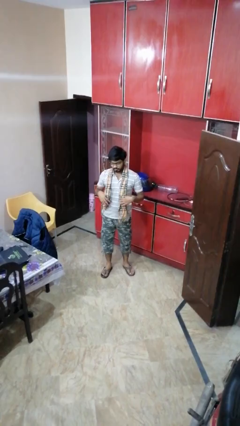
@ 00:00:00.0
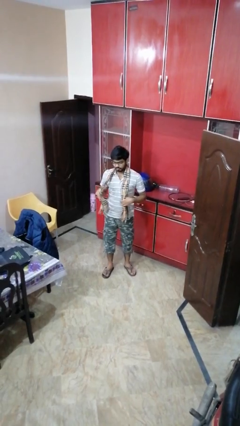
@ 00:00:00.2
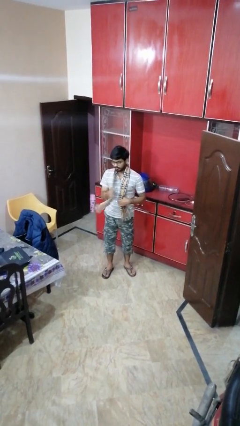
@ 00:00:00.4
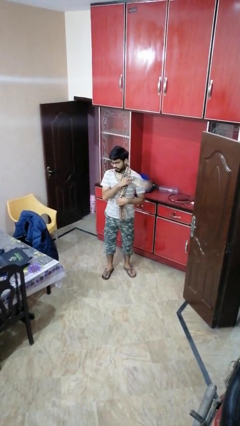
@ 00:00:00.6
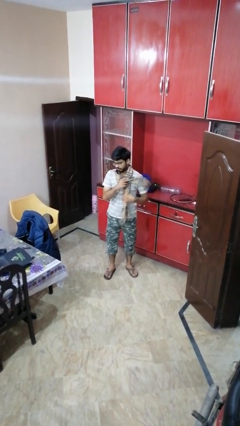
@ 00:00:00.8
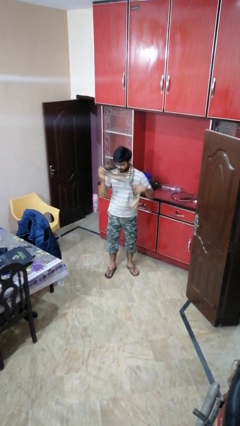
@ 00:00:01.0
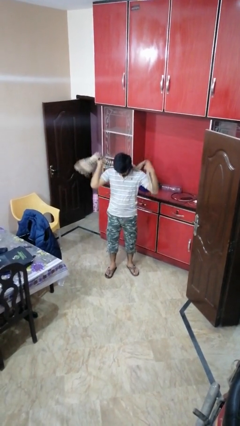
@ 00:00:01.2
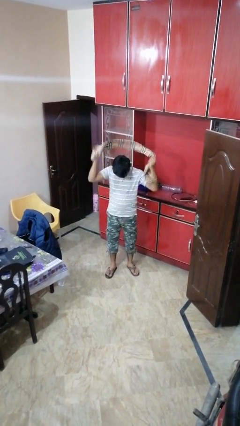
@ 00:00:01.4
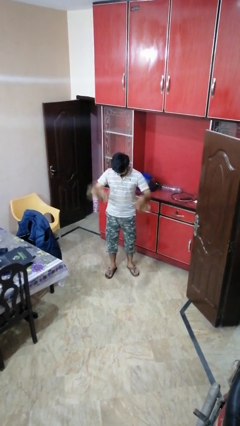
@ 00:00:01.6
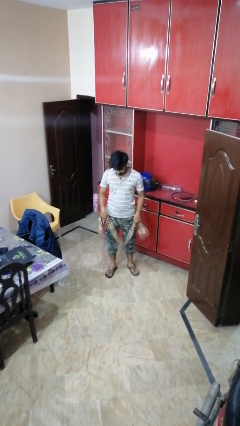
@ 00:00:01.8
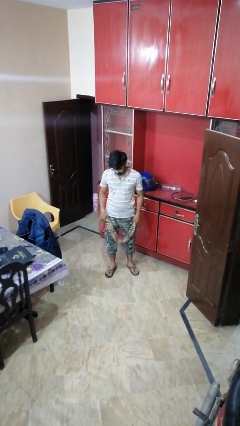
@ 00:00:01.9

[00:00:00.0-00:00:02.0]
person takes off scarf

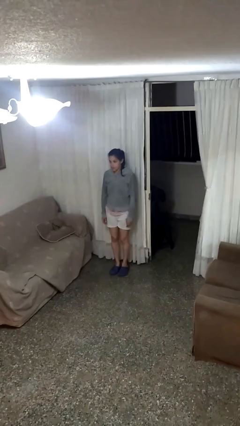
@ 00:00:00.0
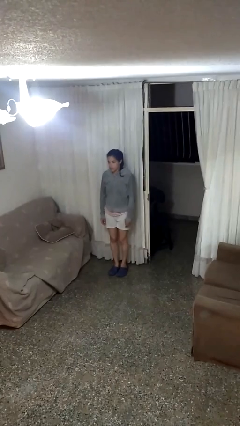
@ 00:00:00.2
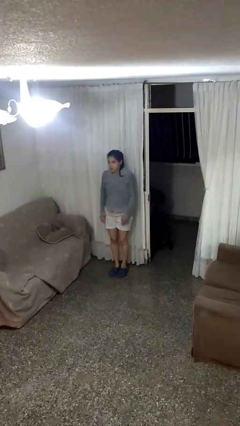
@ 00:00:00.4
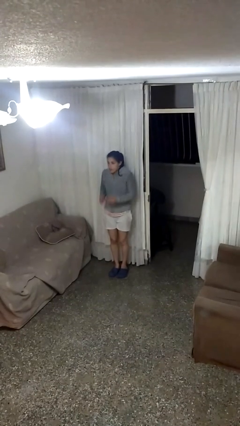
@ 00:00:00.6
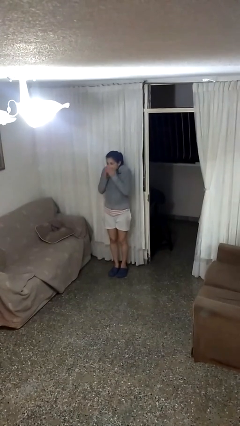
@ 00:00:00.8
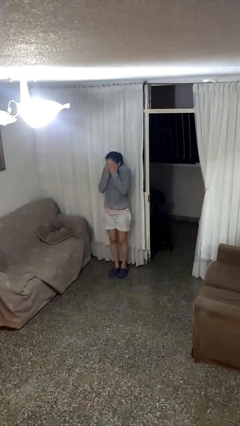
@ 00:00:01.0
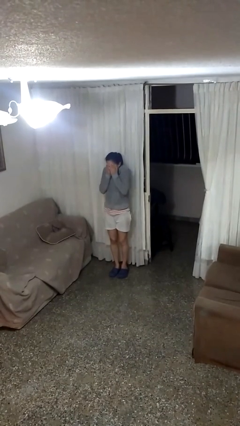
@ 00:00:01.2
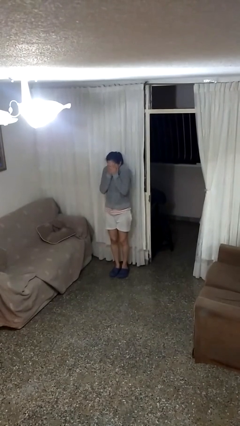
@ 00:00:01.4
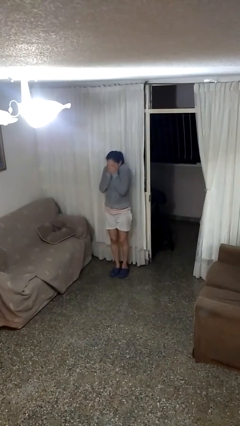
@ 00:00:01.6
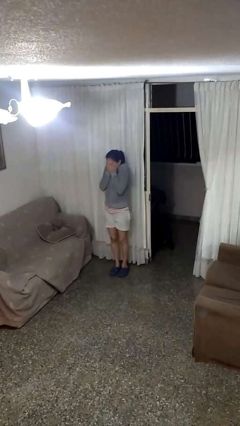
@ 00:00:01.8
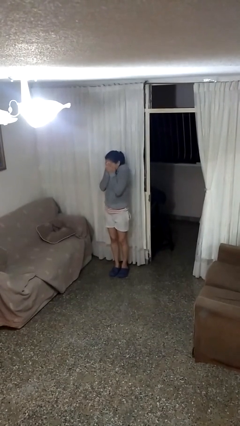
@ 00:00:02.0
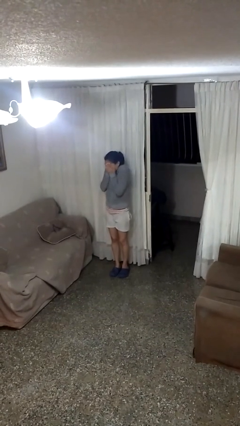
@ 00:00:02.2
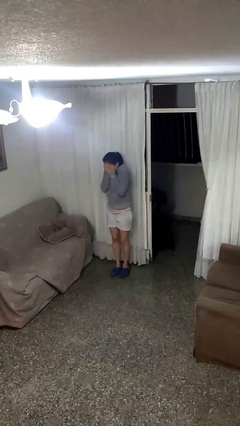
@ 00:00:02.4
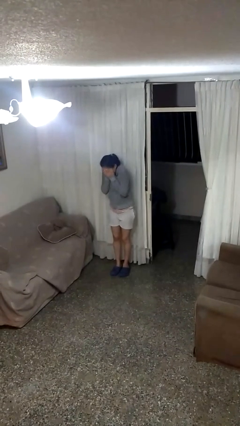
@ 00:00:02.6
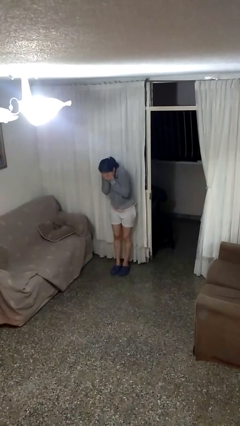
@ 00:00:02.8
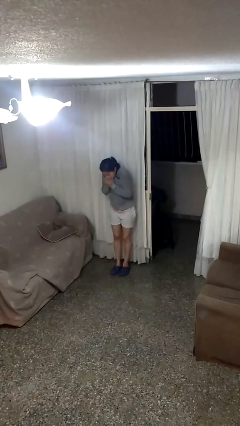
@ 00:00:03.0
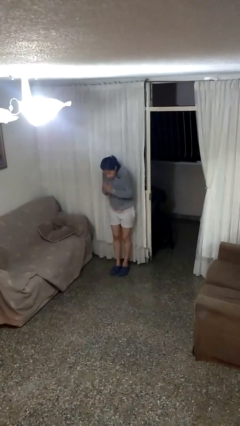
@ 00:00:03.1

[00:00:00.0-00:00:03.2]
person covers face with hands

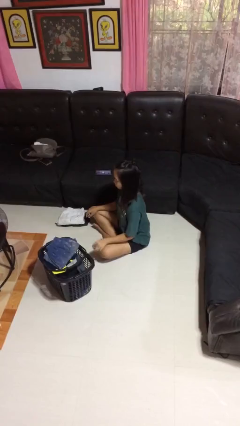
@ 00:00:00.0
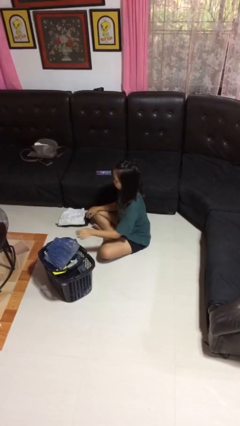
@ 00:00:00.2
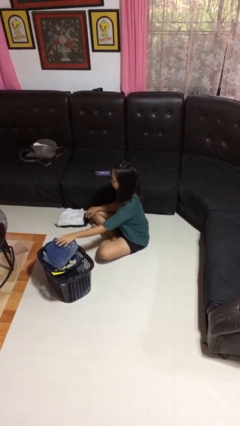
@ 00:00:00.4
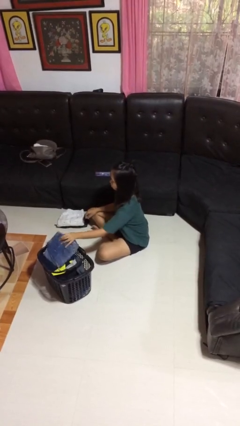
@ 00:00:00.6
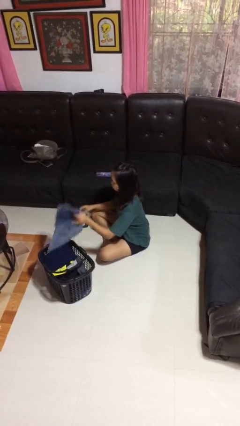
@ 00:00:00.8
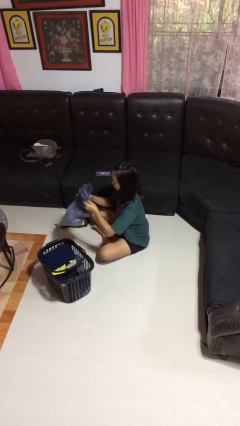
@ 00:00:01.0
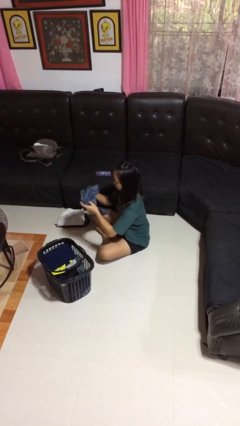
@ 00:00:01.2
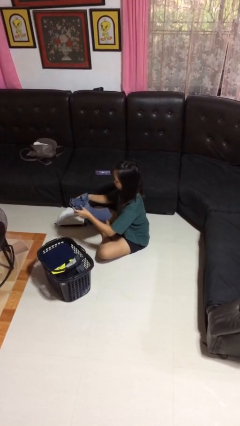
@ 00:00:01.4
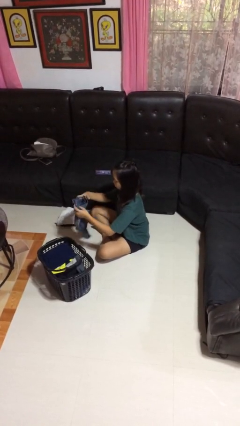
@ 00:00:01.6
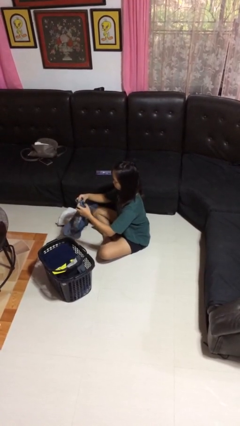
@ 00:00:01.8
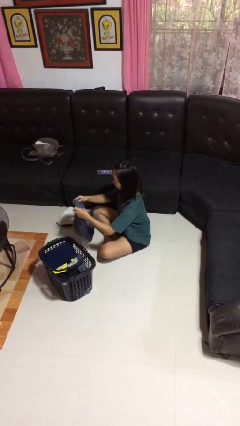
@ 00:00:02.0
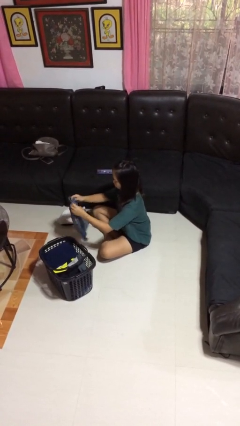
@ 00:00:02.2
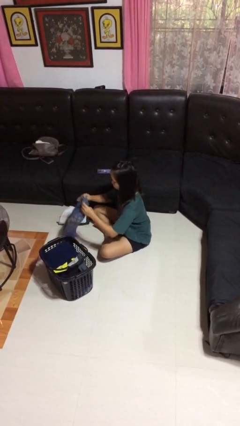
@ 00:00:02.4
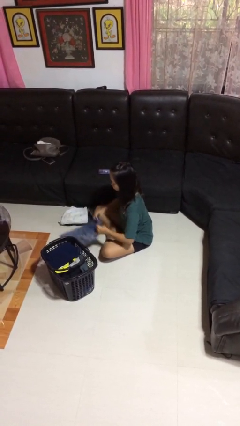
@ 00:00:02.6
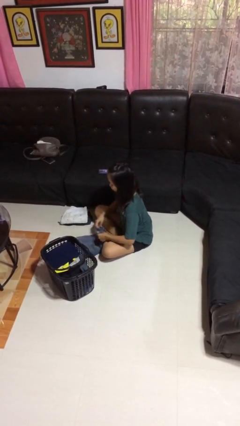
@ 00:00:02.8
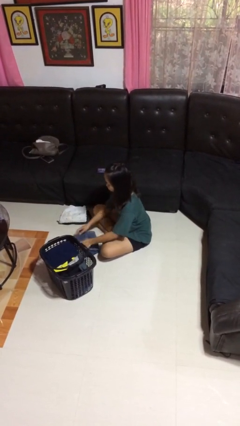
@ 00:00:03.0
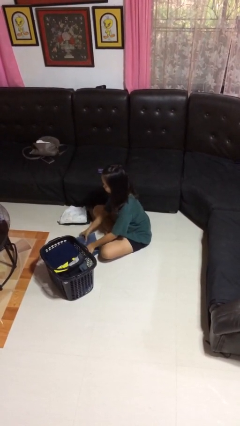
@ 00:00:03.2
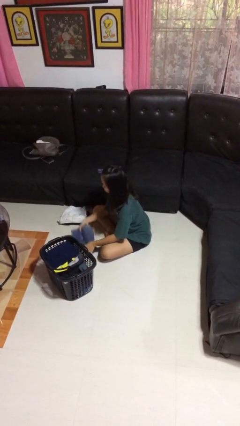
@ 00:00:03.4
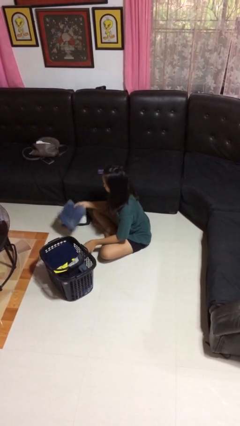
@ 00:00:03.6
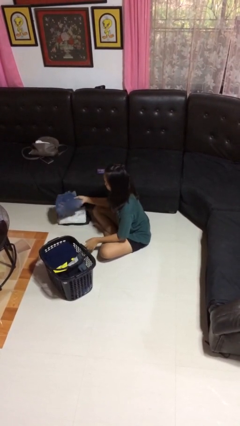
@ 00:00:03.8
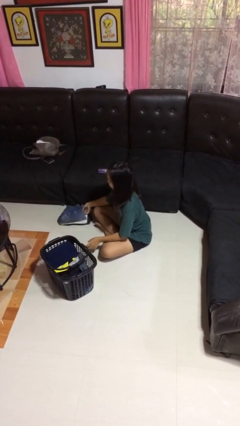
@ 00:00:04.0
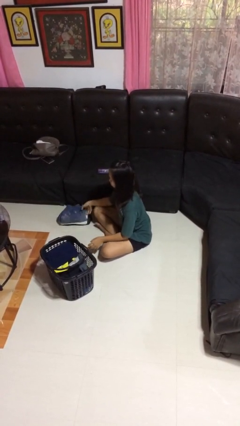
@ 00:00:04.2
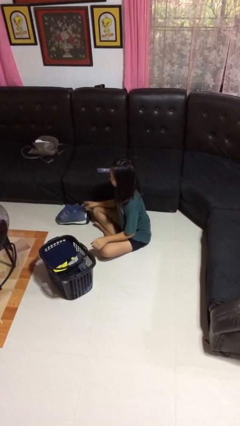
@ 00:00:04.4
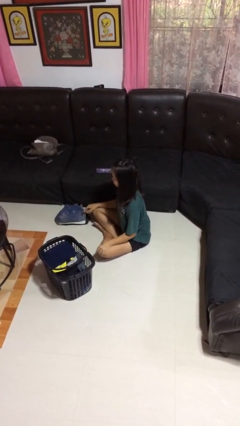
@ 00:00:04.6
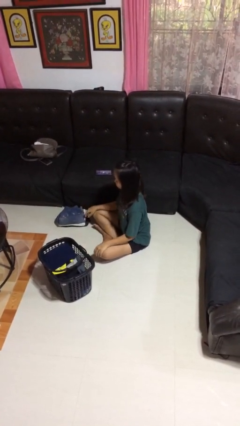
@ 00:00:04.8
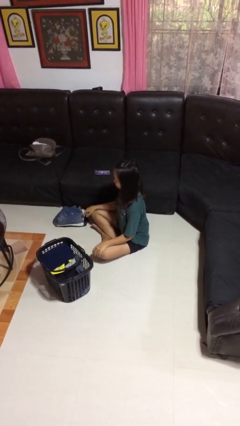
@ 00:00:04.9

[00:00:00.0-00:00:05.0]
person folds pants

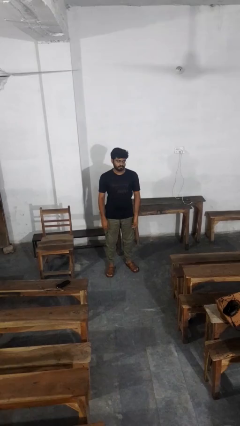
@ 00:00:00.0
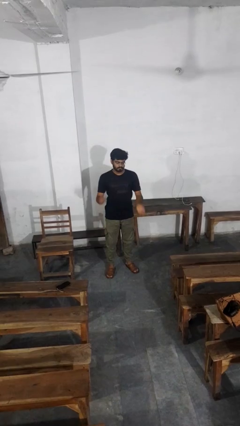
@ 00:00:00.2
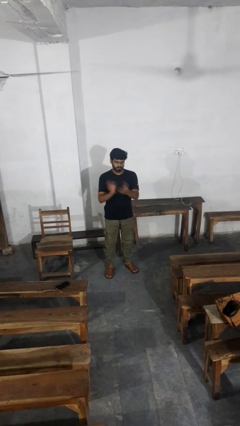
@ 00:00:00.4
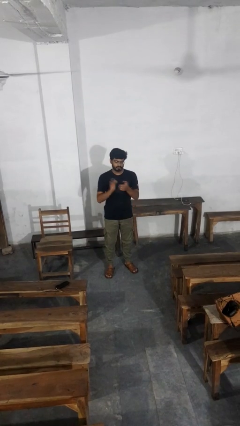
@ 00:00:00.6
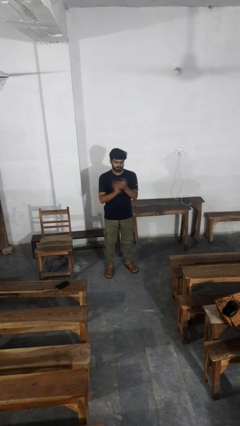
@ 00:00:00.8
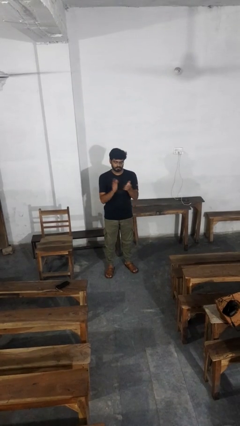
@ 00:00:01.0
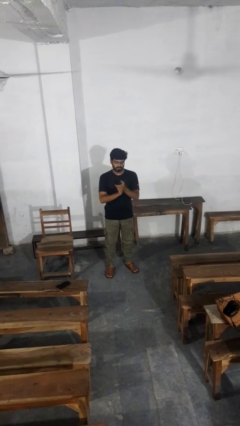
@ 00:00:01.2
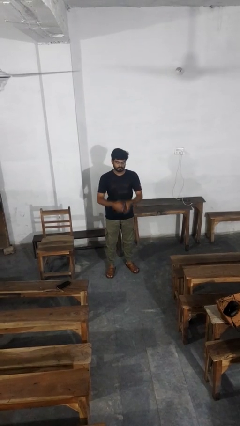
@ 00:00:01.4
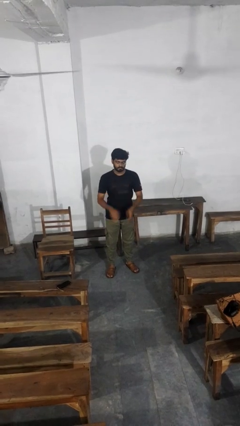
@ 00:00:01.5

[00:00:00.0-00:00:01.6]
person claps hands

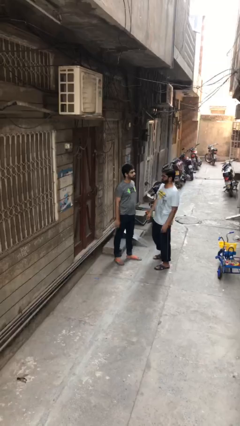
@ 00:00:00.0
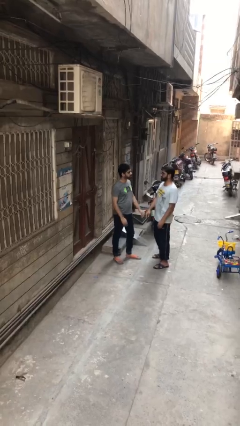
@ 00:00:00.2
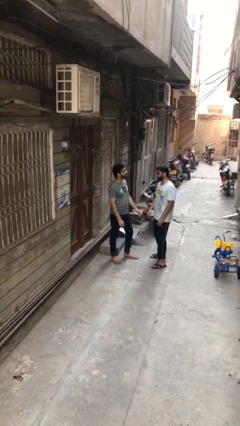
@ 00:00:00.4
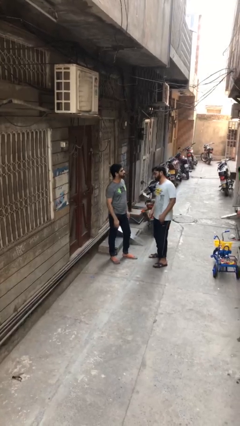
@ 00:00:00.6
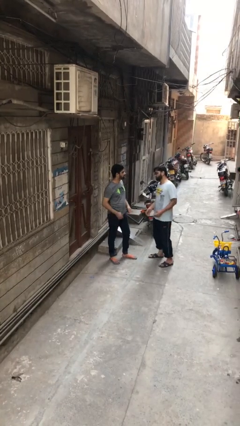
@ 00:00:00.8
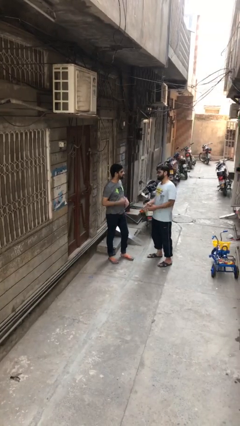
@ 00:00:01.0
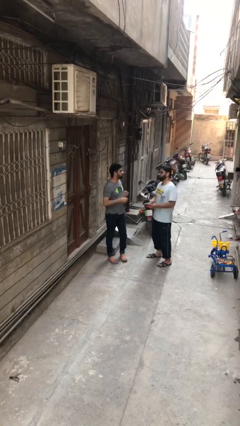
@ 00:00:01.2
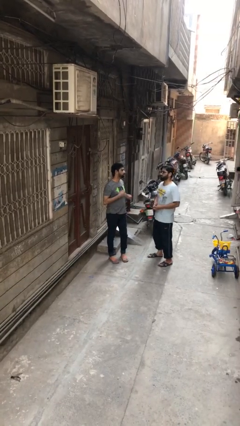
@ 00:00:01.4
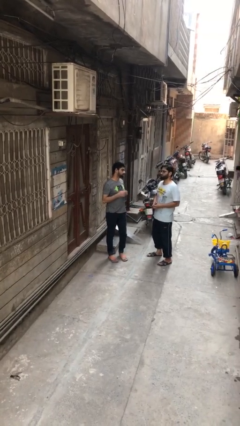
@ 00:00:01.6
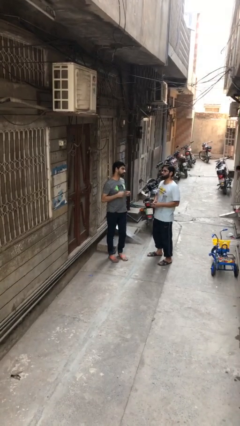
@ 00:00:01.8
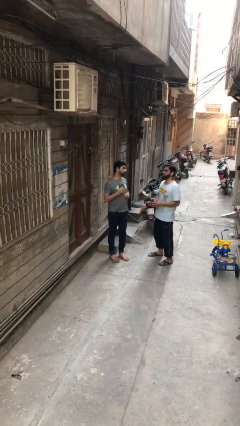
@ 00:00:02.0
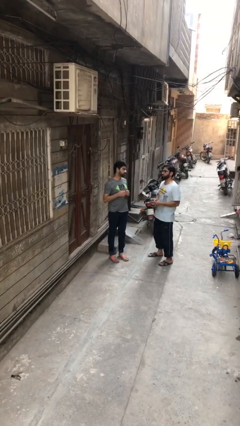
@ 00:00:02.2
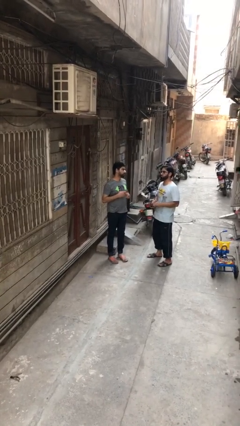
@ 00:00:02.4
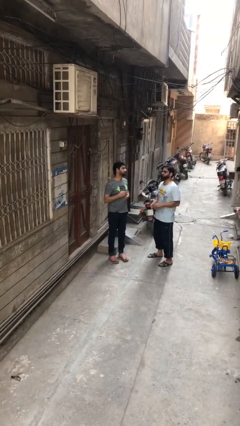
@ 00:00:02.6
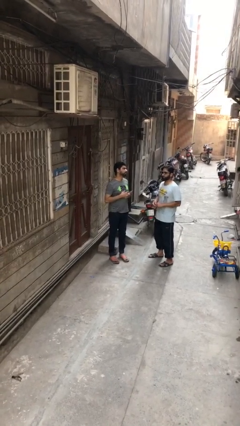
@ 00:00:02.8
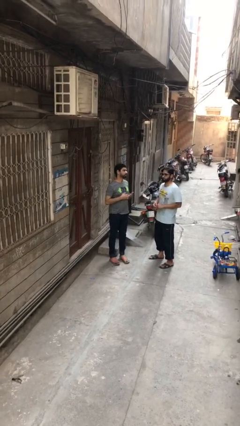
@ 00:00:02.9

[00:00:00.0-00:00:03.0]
person talks to person

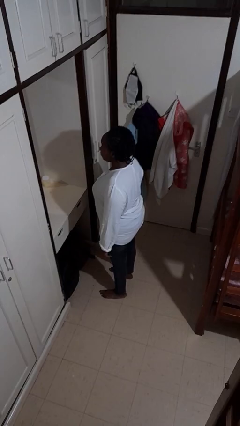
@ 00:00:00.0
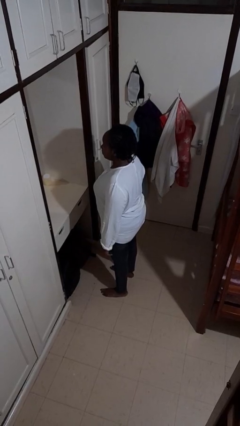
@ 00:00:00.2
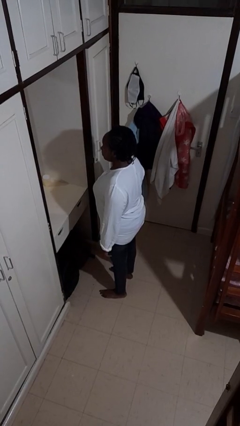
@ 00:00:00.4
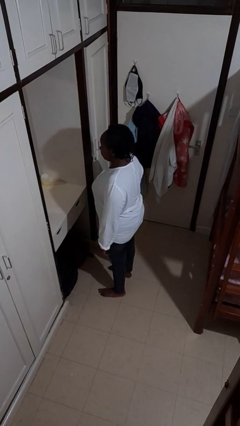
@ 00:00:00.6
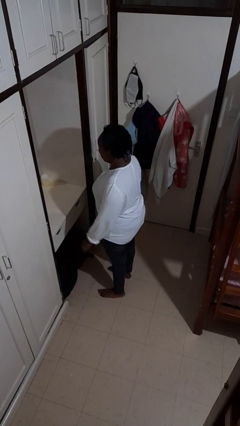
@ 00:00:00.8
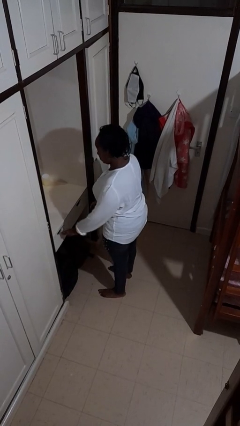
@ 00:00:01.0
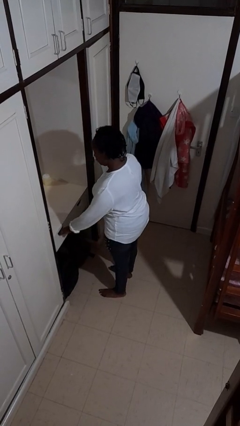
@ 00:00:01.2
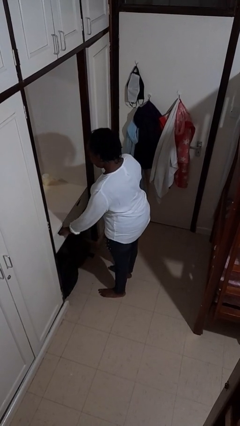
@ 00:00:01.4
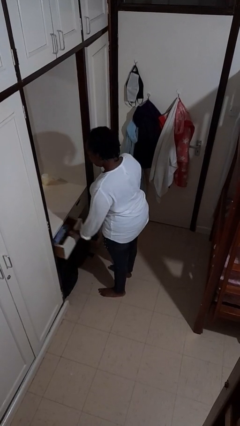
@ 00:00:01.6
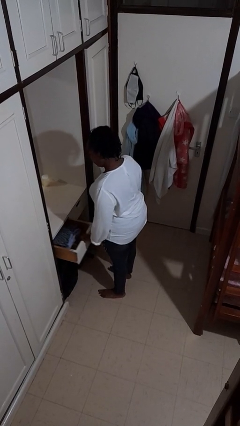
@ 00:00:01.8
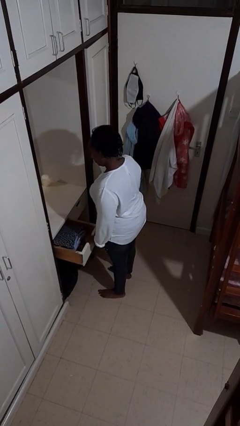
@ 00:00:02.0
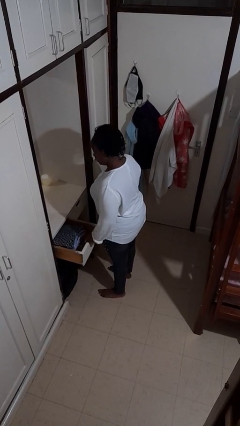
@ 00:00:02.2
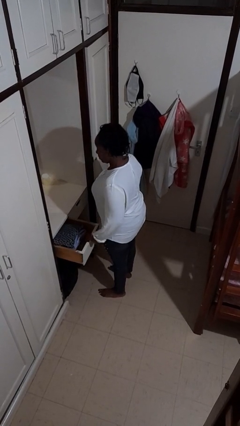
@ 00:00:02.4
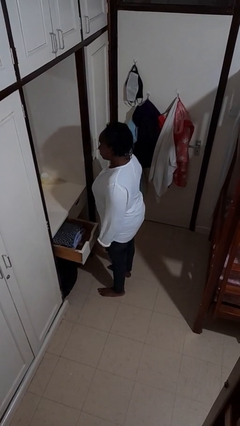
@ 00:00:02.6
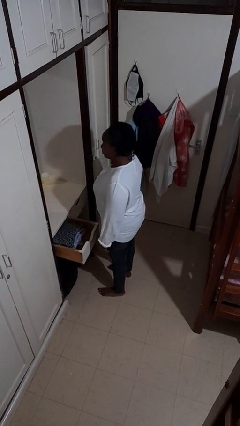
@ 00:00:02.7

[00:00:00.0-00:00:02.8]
person opens dresser drawer
